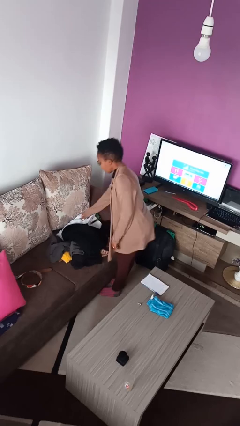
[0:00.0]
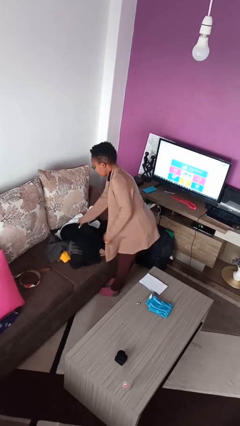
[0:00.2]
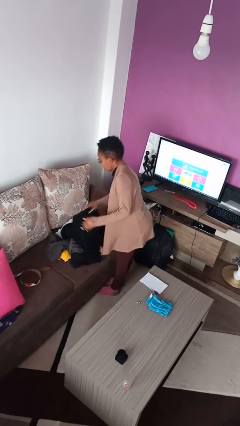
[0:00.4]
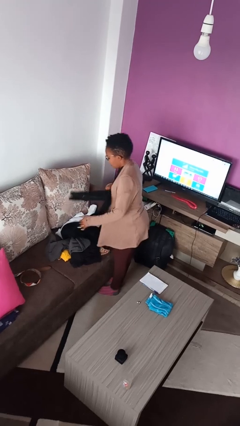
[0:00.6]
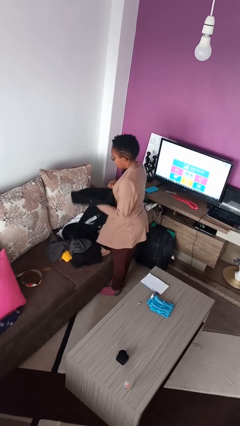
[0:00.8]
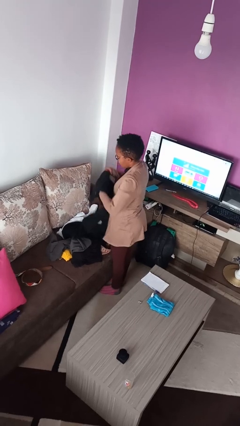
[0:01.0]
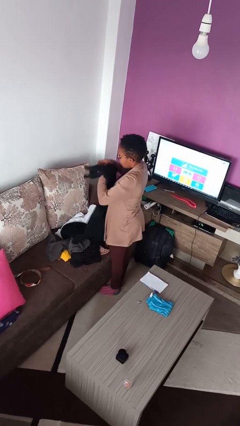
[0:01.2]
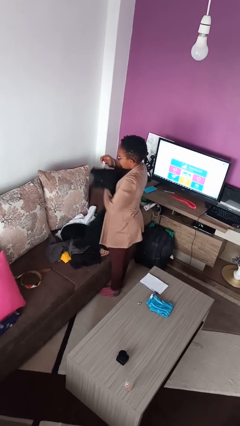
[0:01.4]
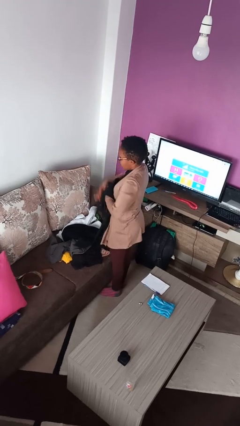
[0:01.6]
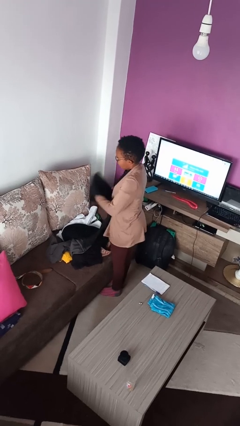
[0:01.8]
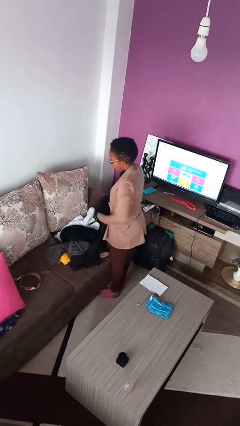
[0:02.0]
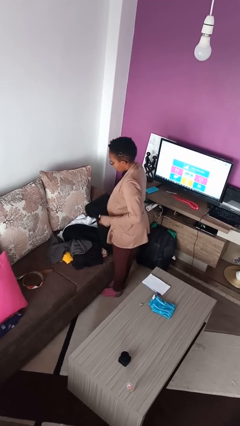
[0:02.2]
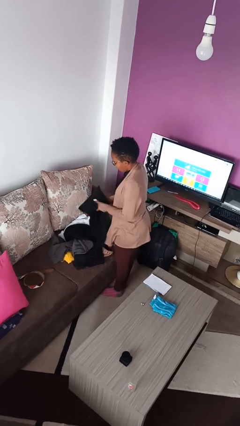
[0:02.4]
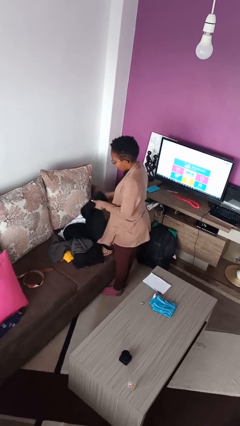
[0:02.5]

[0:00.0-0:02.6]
person folds pants

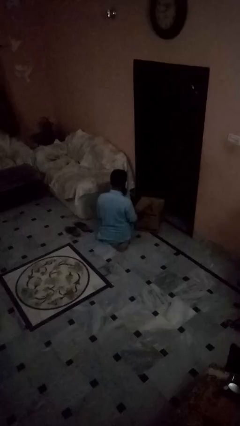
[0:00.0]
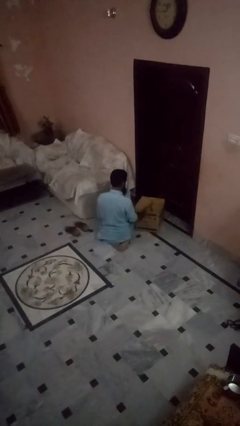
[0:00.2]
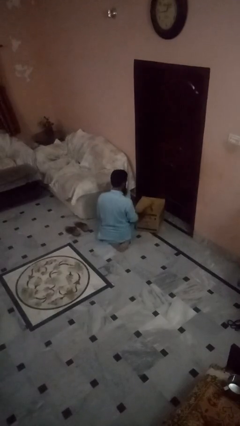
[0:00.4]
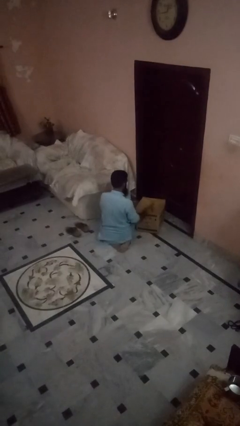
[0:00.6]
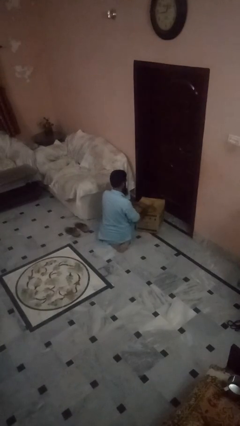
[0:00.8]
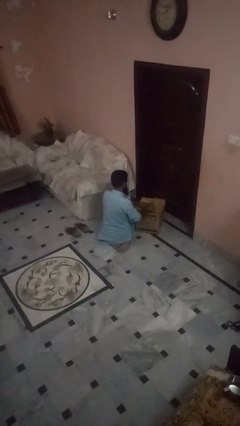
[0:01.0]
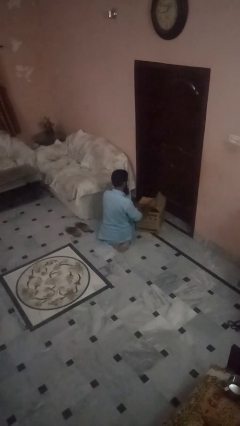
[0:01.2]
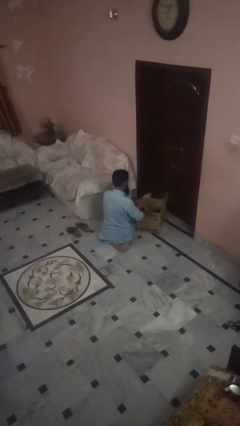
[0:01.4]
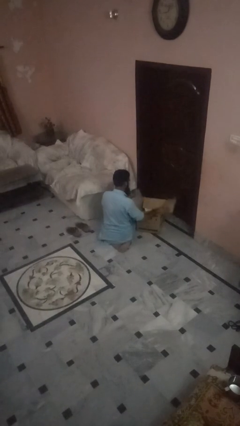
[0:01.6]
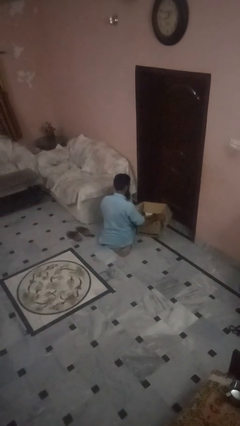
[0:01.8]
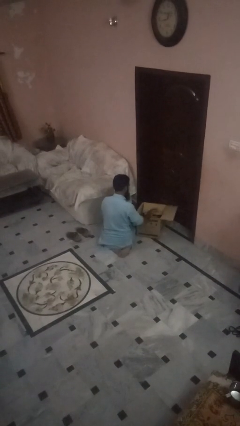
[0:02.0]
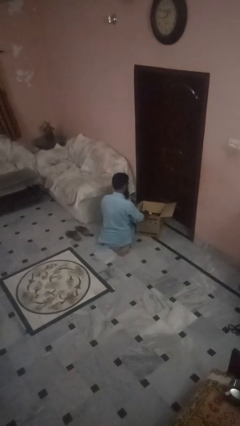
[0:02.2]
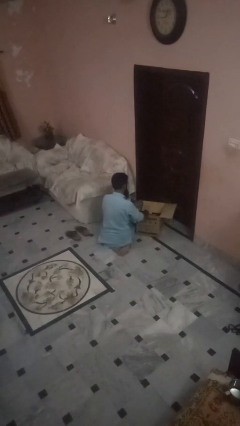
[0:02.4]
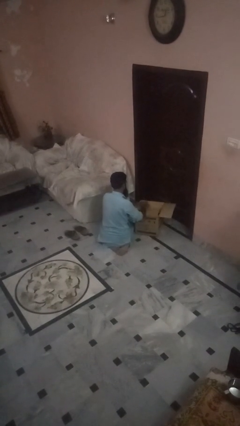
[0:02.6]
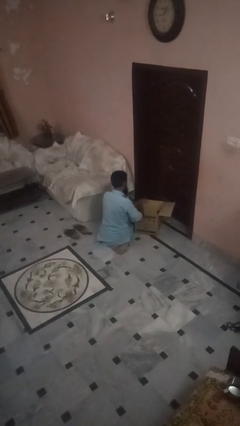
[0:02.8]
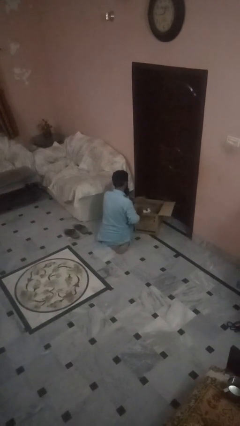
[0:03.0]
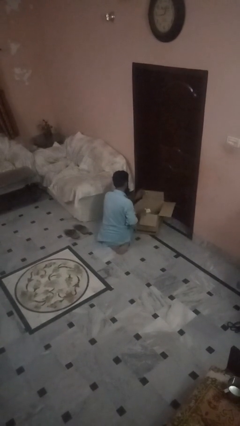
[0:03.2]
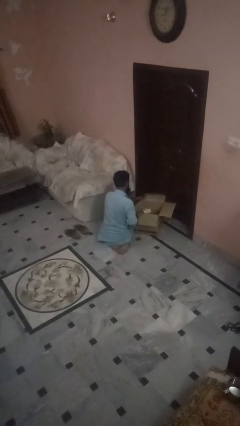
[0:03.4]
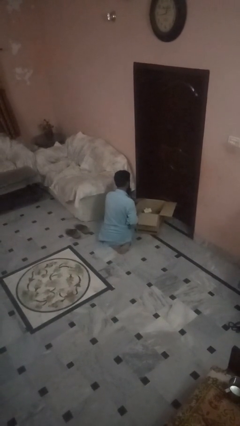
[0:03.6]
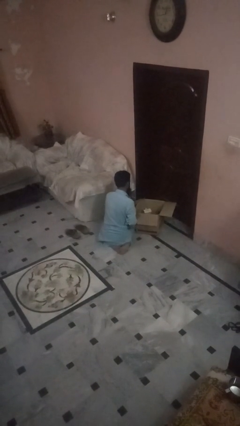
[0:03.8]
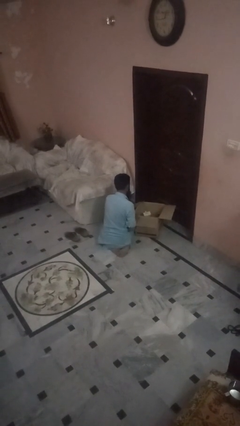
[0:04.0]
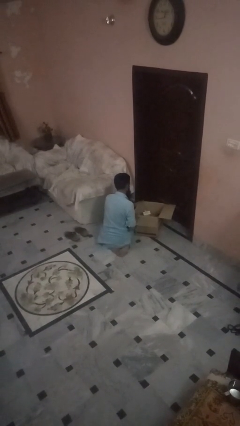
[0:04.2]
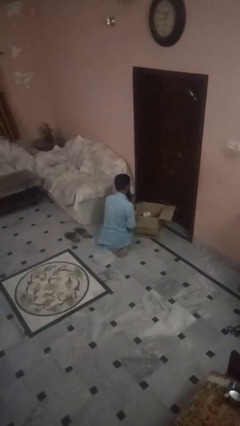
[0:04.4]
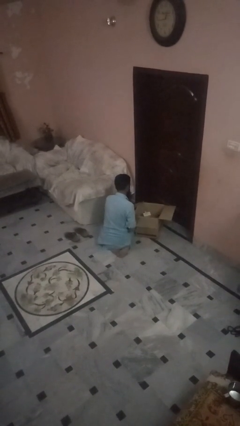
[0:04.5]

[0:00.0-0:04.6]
person opens box

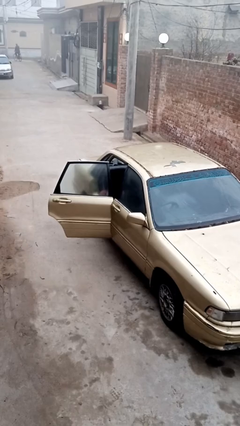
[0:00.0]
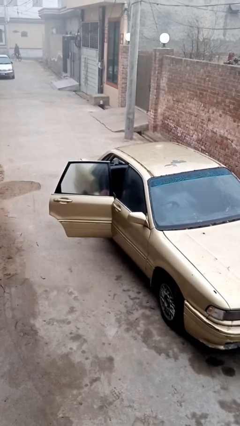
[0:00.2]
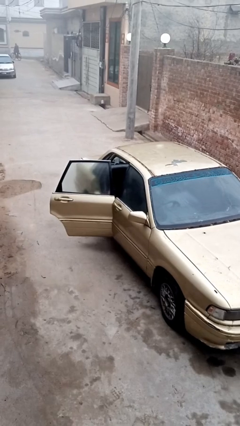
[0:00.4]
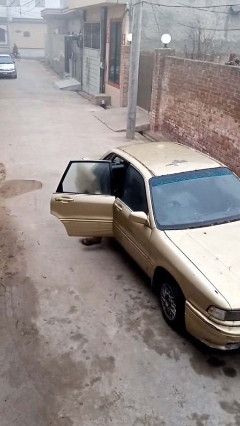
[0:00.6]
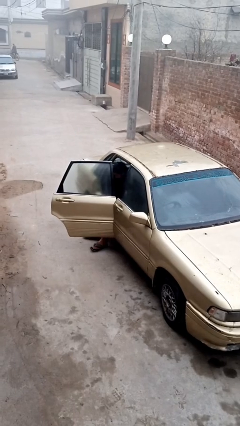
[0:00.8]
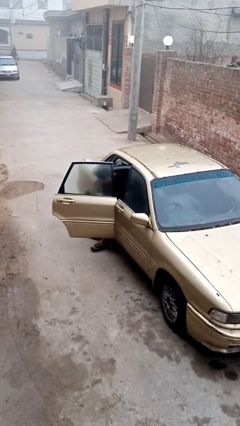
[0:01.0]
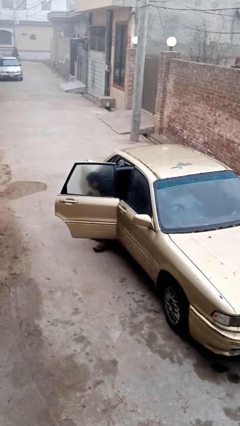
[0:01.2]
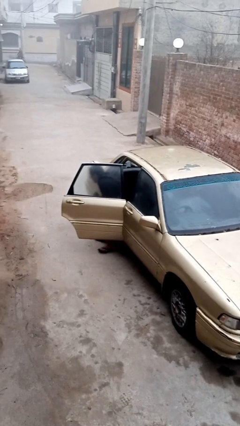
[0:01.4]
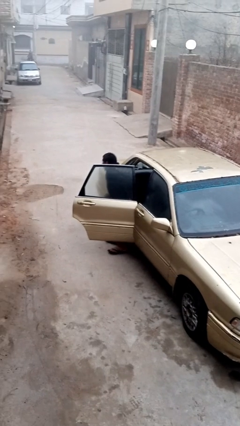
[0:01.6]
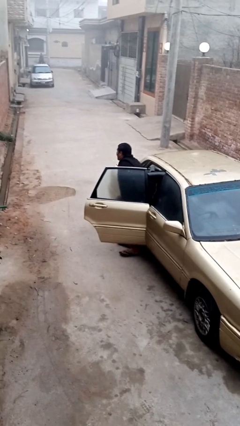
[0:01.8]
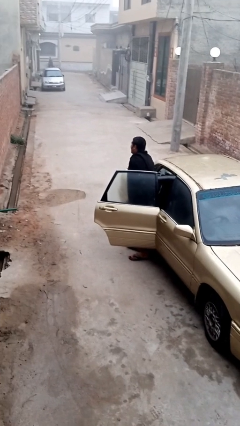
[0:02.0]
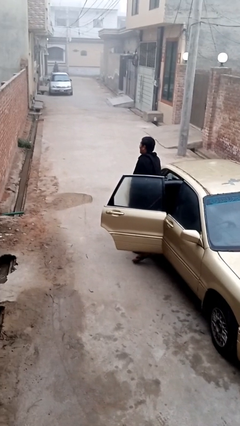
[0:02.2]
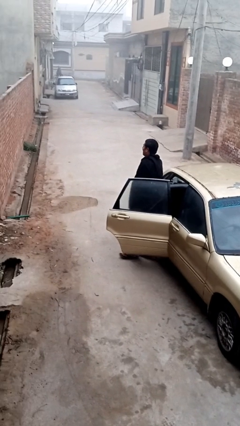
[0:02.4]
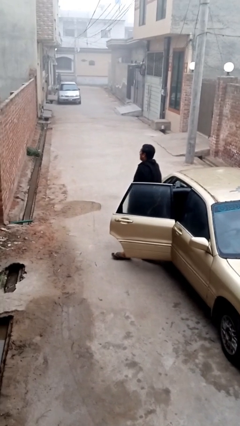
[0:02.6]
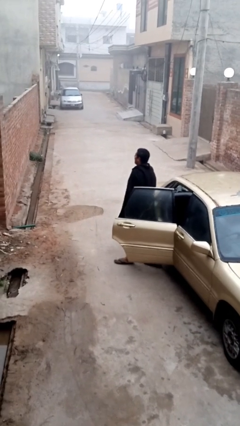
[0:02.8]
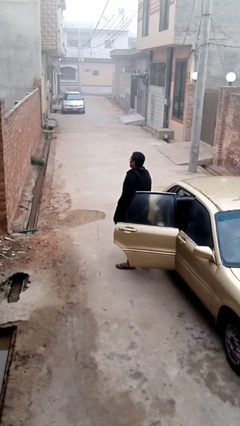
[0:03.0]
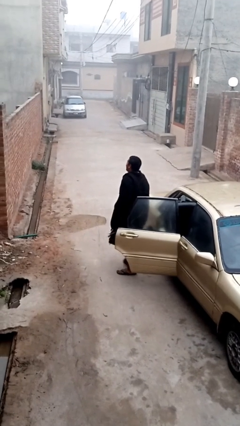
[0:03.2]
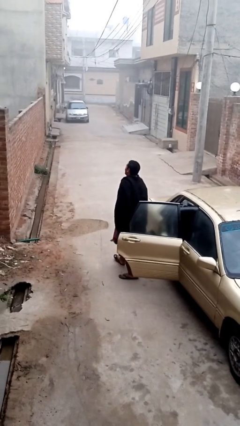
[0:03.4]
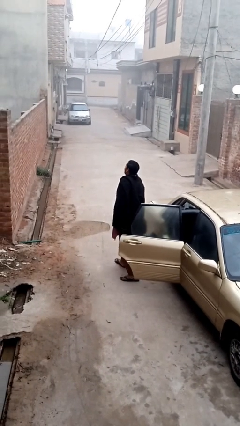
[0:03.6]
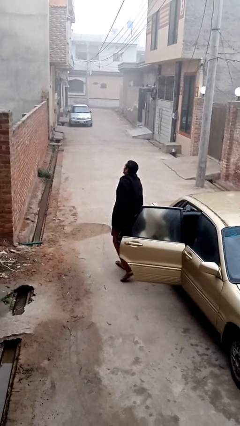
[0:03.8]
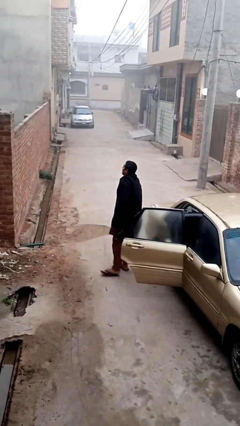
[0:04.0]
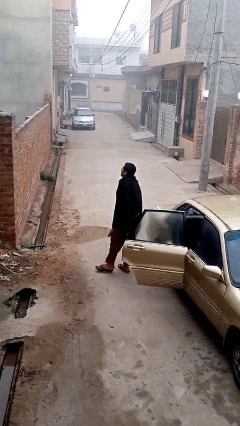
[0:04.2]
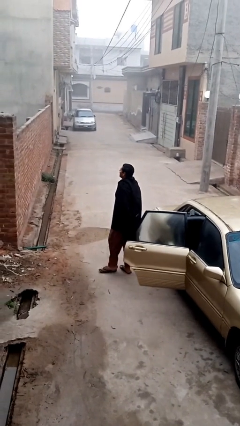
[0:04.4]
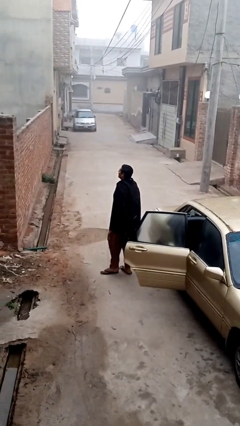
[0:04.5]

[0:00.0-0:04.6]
person exits car

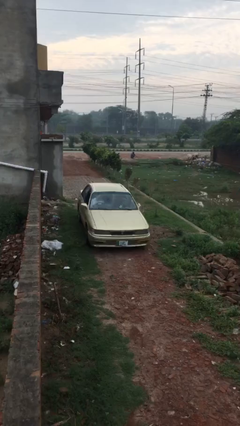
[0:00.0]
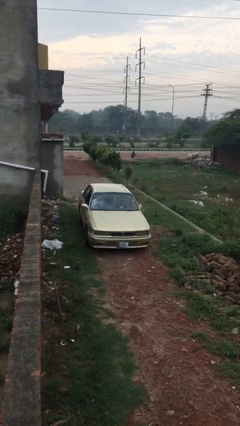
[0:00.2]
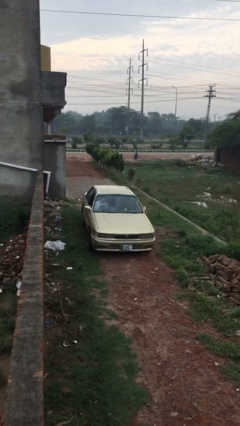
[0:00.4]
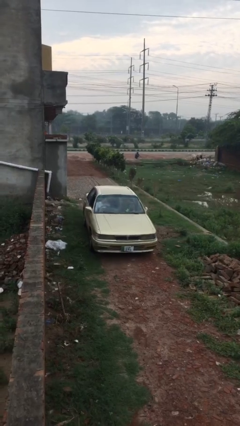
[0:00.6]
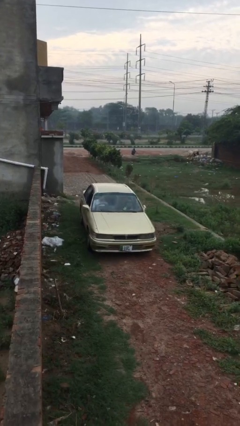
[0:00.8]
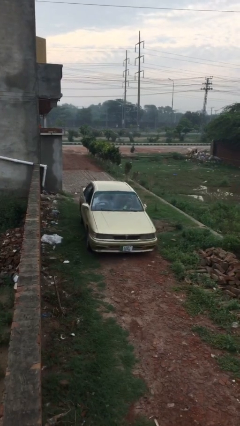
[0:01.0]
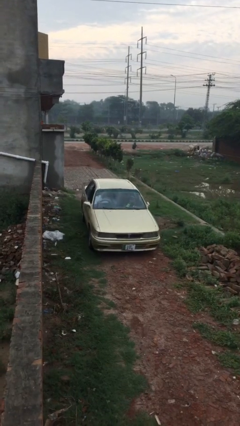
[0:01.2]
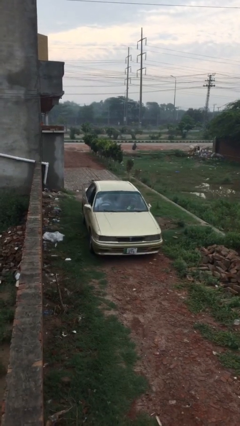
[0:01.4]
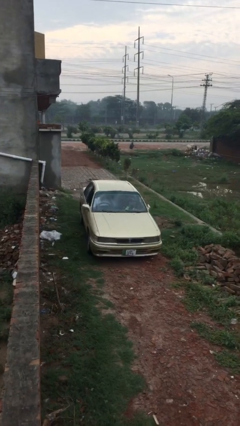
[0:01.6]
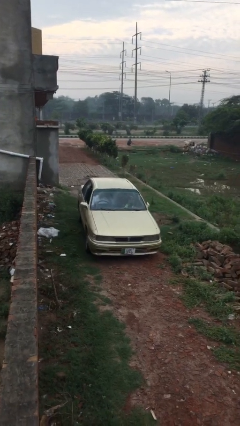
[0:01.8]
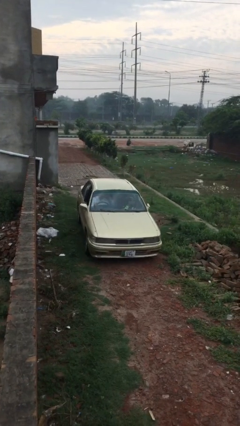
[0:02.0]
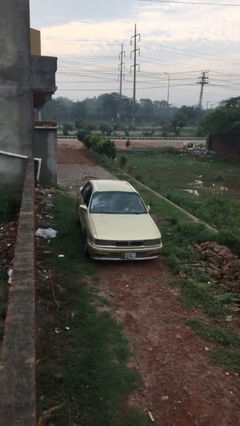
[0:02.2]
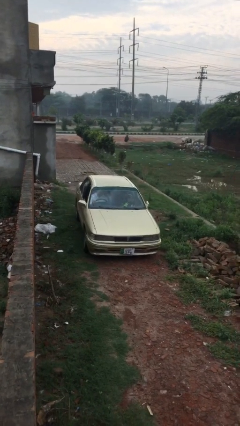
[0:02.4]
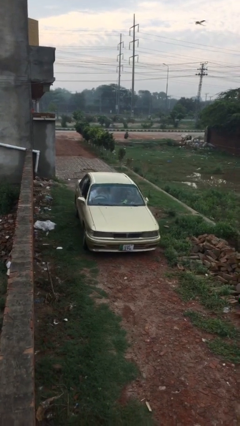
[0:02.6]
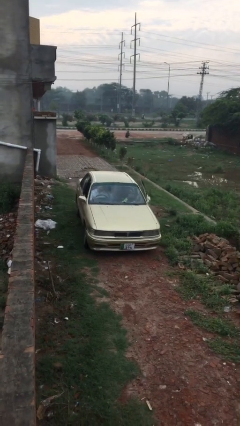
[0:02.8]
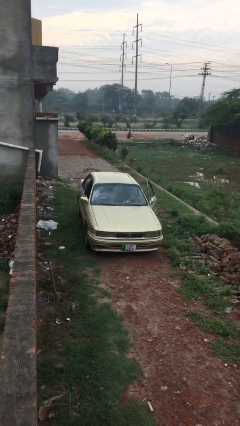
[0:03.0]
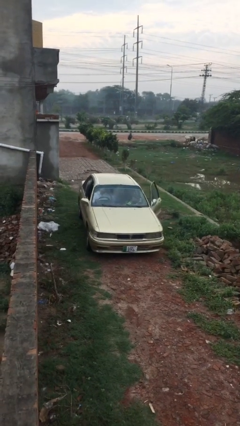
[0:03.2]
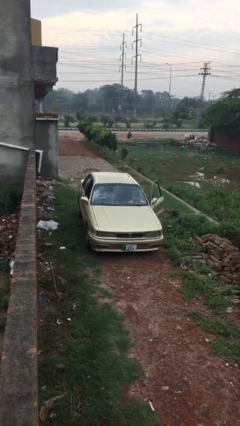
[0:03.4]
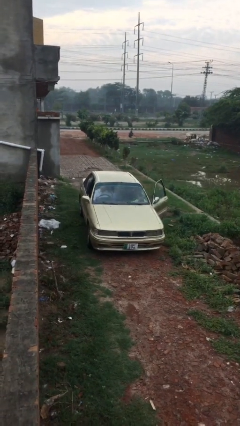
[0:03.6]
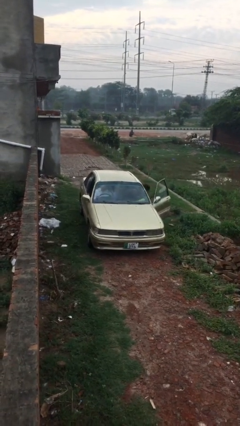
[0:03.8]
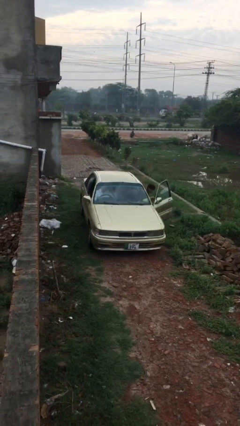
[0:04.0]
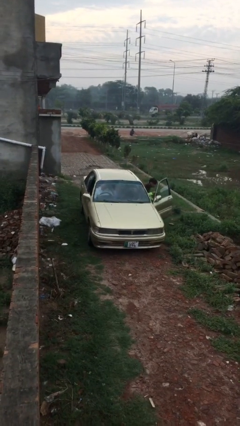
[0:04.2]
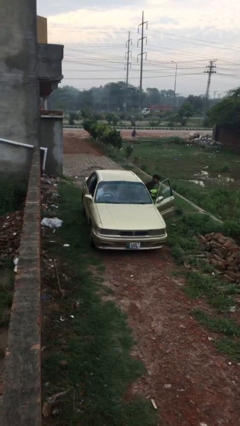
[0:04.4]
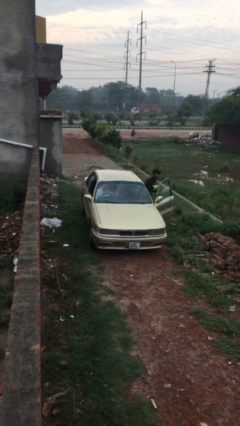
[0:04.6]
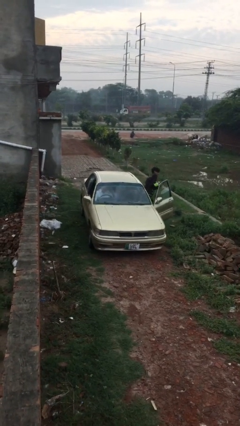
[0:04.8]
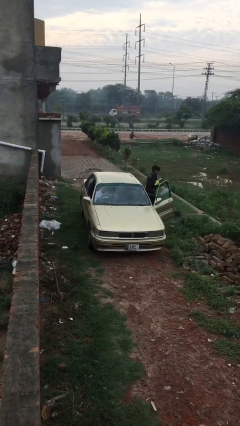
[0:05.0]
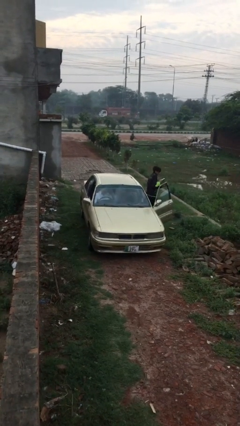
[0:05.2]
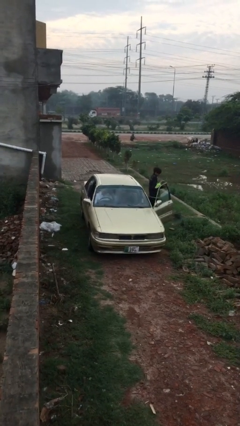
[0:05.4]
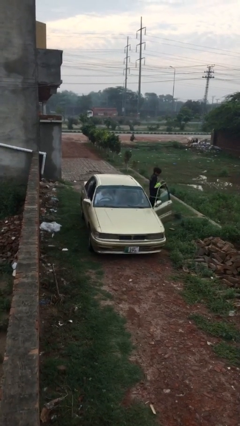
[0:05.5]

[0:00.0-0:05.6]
car drops off person

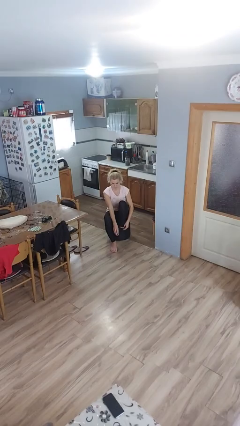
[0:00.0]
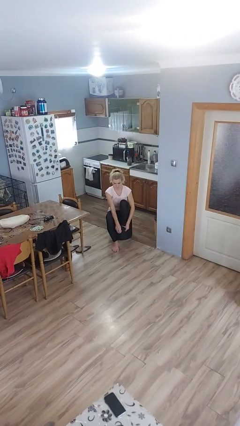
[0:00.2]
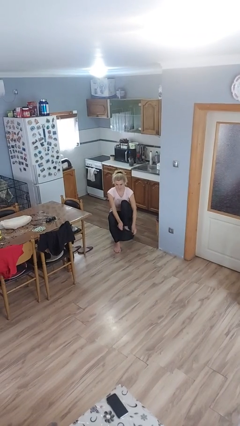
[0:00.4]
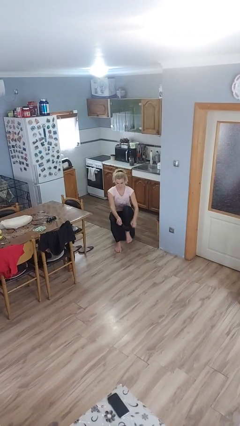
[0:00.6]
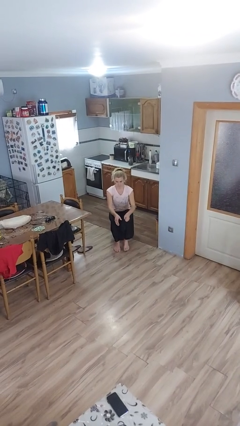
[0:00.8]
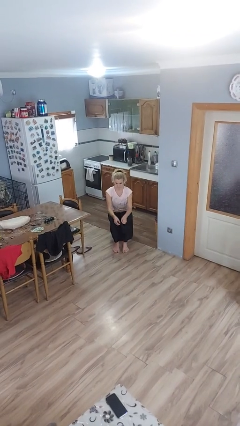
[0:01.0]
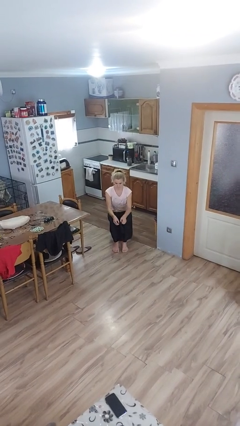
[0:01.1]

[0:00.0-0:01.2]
person takes off socks
